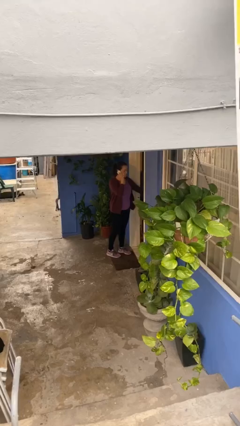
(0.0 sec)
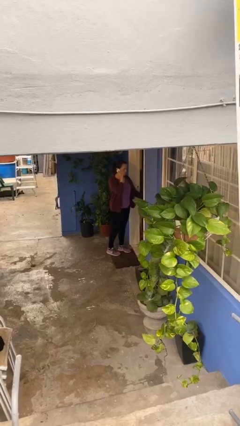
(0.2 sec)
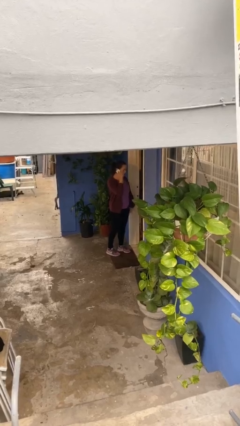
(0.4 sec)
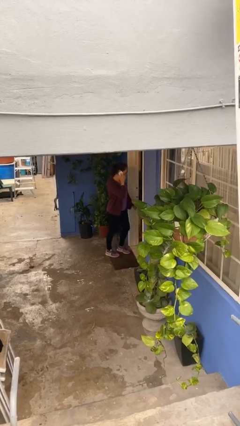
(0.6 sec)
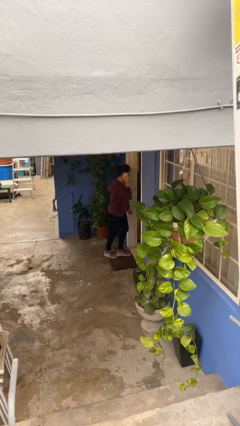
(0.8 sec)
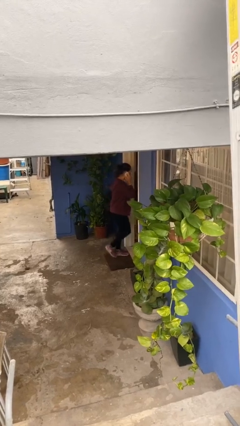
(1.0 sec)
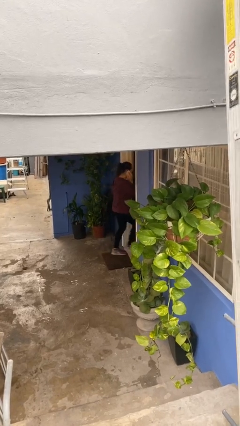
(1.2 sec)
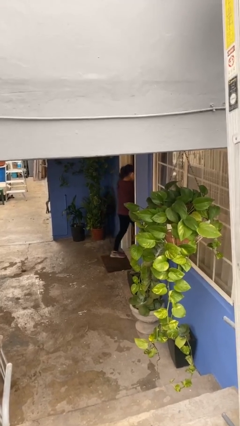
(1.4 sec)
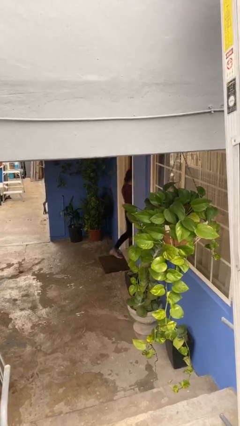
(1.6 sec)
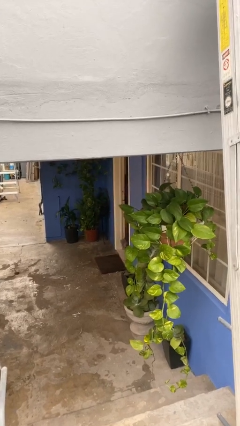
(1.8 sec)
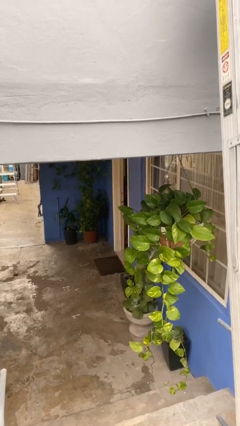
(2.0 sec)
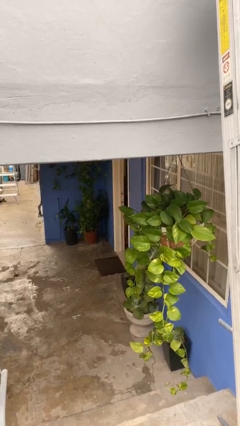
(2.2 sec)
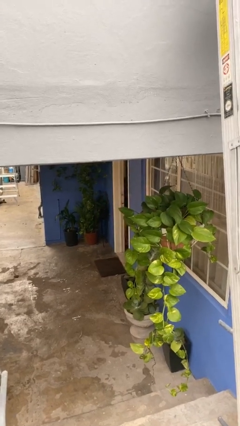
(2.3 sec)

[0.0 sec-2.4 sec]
person exits scene through structure

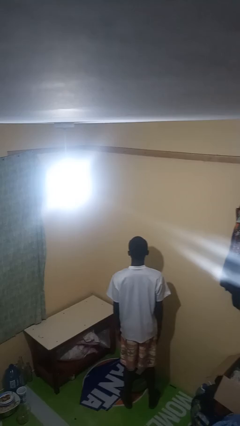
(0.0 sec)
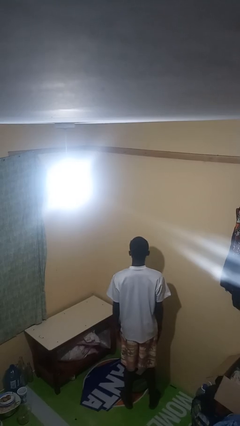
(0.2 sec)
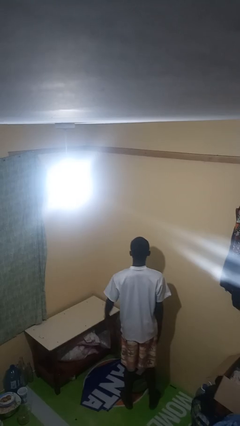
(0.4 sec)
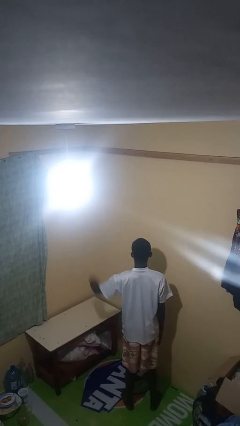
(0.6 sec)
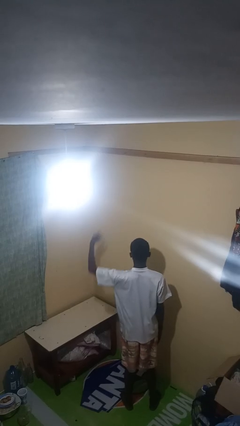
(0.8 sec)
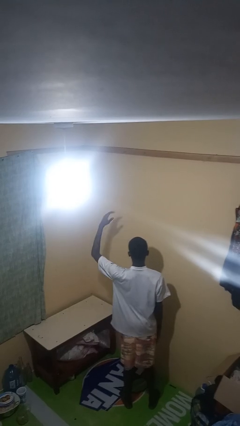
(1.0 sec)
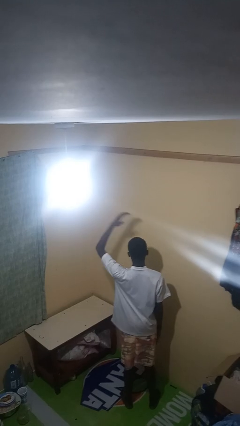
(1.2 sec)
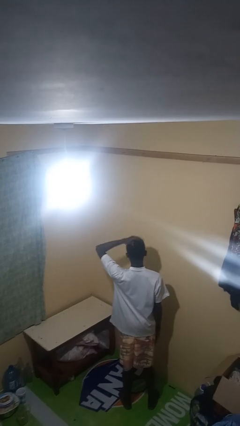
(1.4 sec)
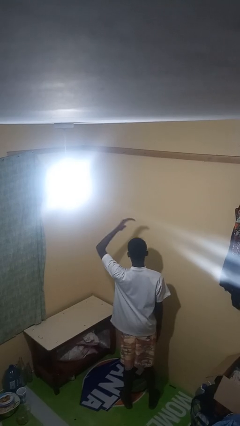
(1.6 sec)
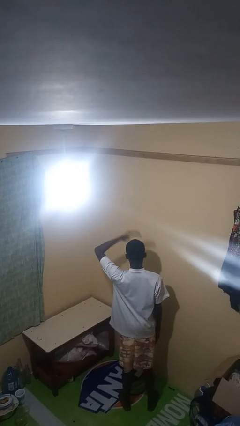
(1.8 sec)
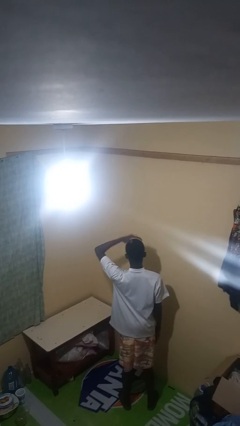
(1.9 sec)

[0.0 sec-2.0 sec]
person pats head

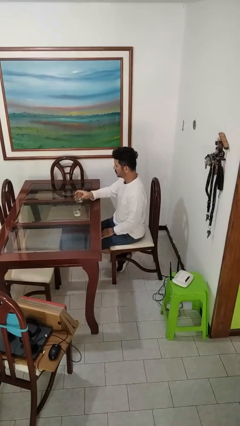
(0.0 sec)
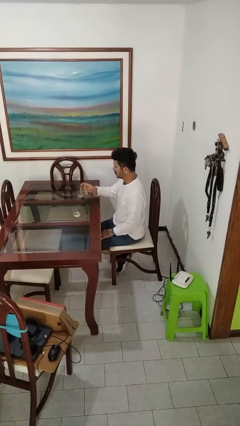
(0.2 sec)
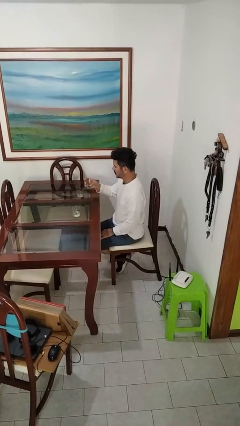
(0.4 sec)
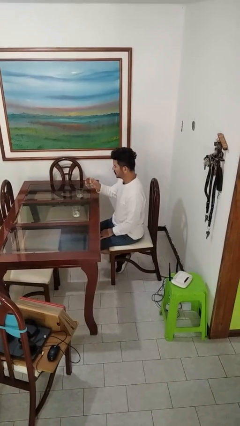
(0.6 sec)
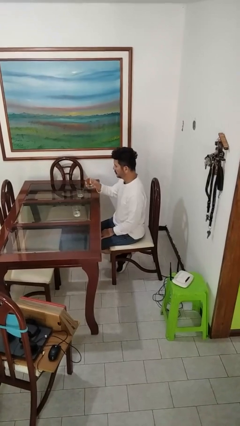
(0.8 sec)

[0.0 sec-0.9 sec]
person picks up object from table

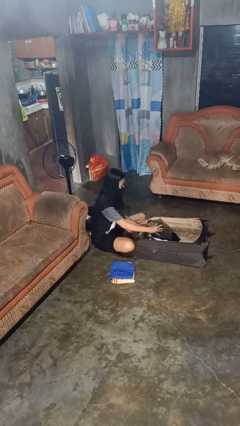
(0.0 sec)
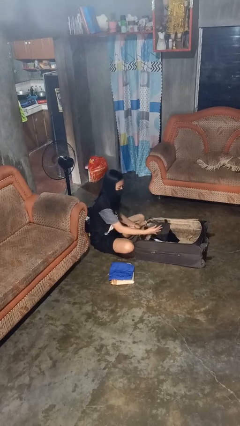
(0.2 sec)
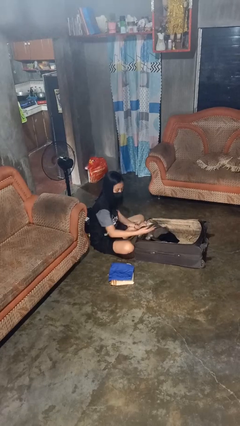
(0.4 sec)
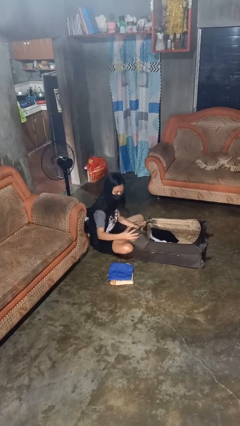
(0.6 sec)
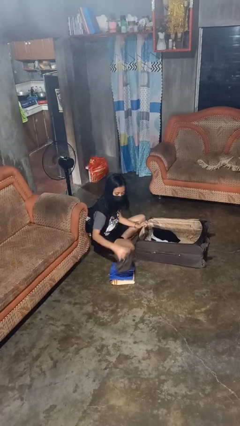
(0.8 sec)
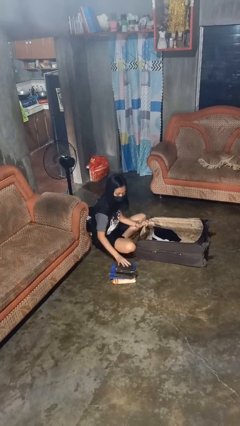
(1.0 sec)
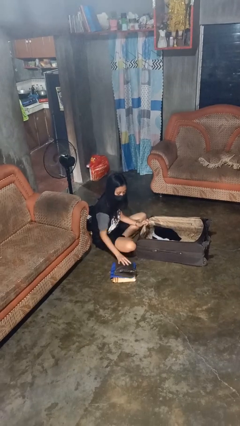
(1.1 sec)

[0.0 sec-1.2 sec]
person unloads clothes from suitcase

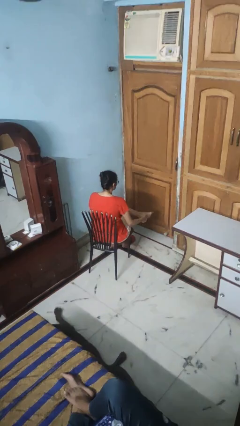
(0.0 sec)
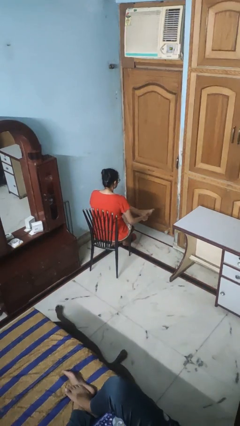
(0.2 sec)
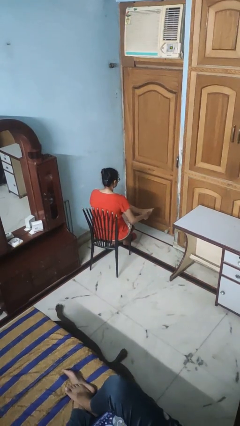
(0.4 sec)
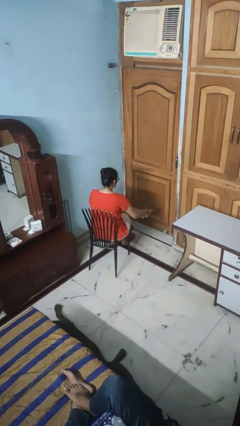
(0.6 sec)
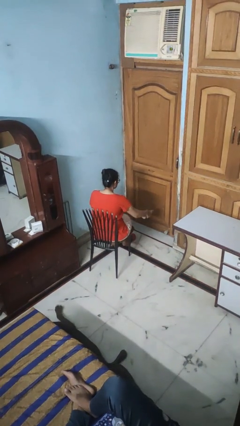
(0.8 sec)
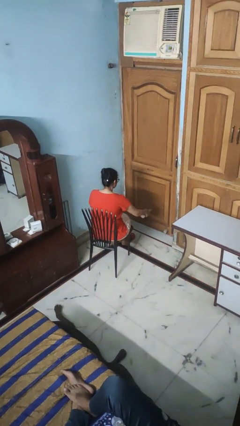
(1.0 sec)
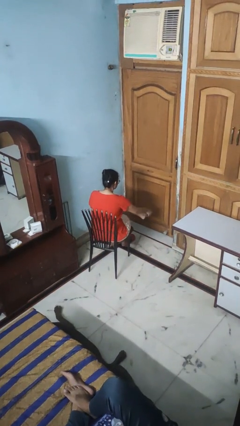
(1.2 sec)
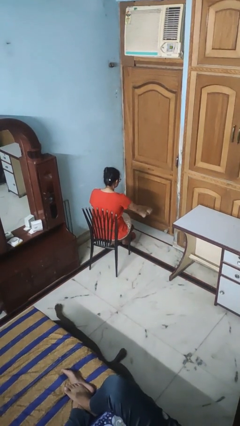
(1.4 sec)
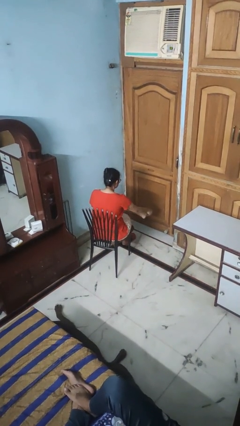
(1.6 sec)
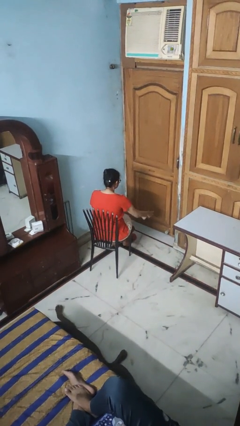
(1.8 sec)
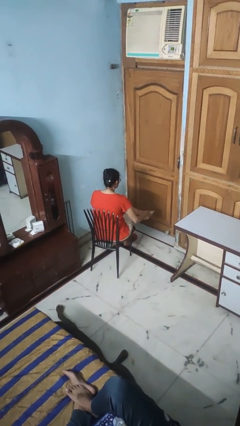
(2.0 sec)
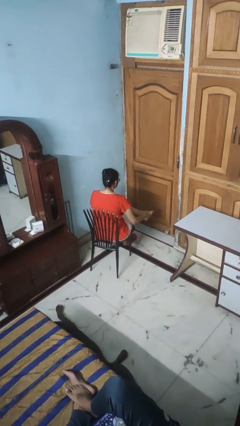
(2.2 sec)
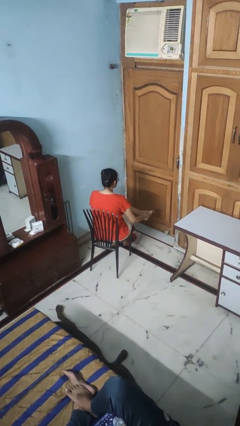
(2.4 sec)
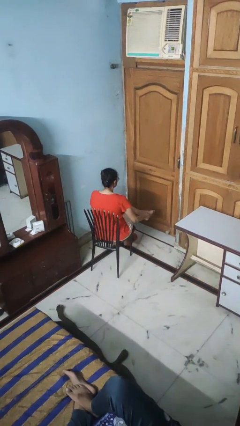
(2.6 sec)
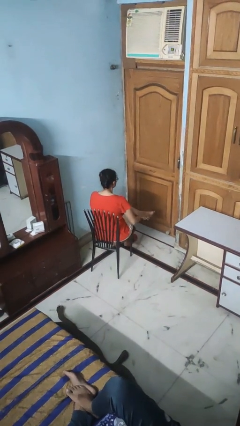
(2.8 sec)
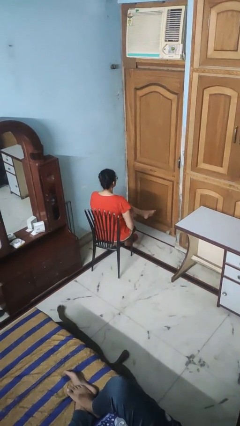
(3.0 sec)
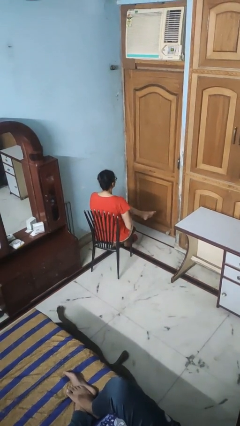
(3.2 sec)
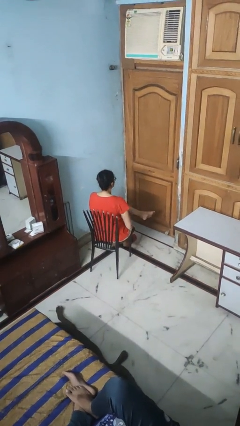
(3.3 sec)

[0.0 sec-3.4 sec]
person rubs foot

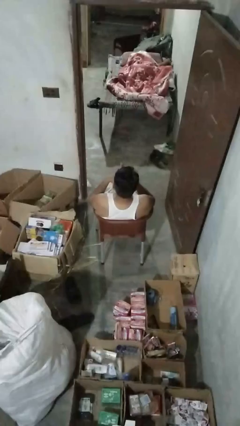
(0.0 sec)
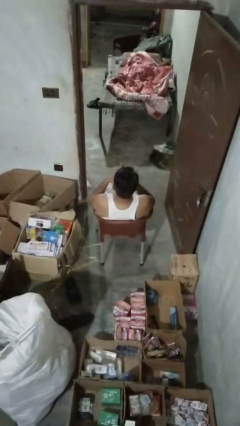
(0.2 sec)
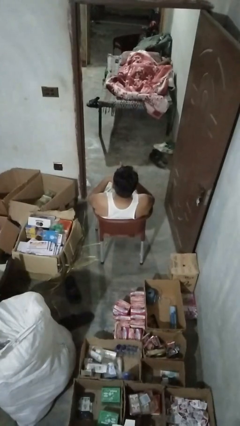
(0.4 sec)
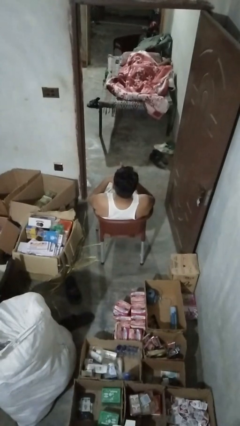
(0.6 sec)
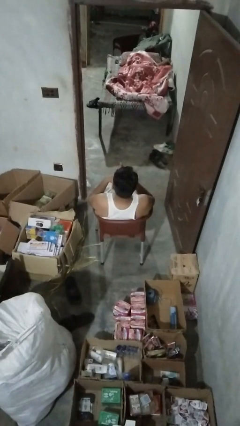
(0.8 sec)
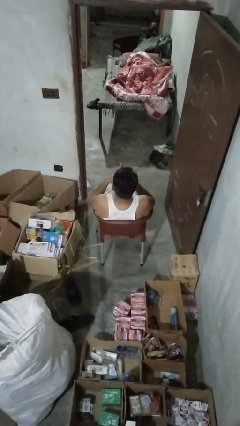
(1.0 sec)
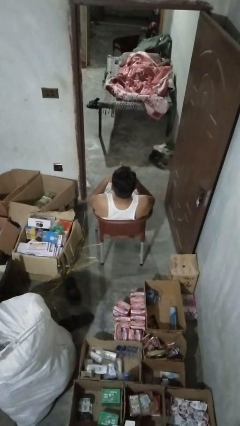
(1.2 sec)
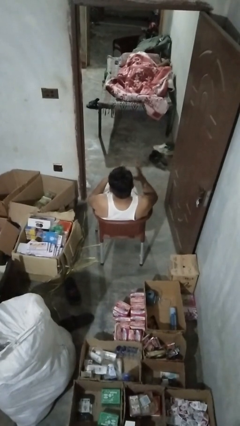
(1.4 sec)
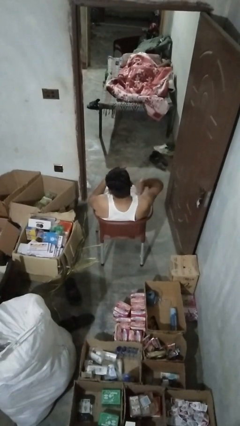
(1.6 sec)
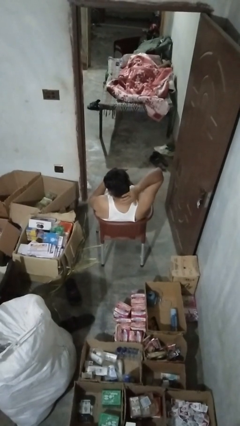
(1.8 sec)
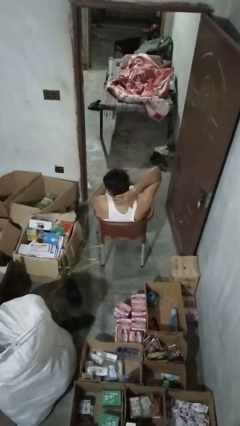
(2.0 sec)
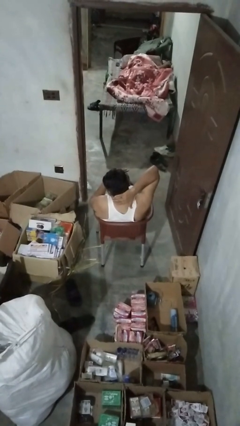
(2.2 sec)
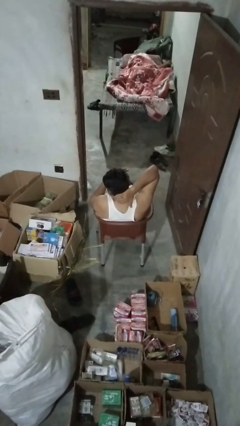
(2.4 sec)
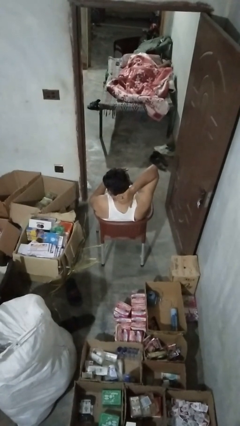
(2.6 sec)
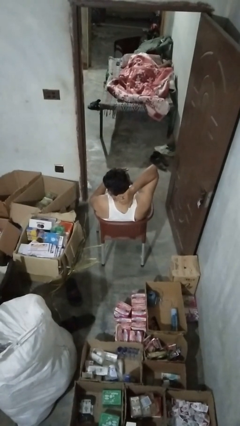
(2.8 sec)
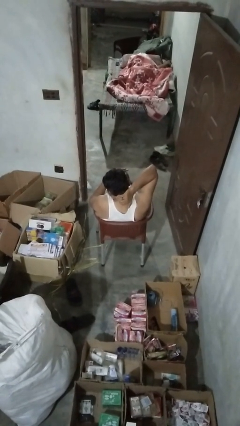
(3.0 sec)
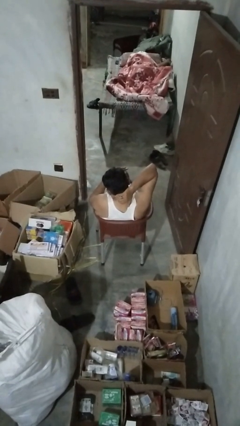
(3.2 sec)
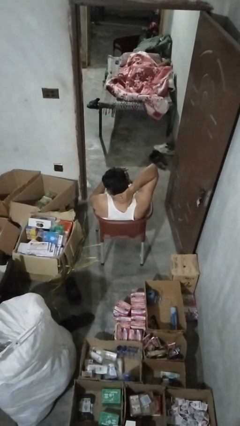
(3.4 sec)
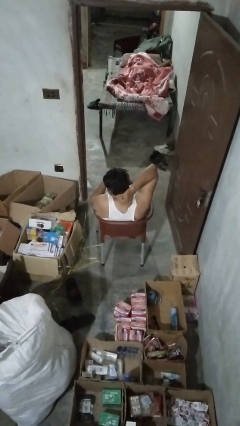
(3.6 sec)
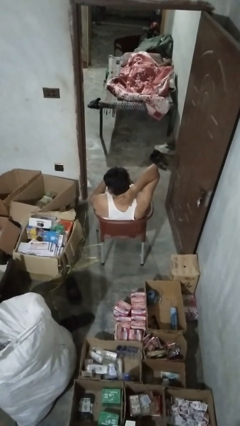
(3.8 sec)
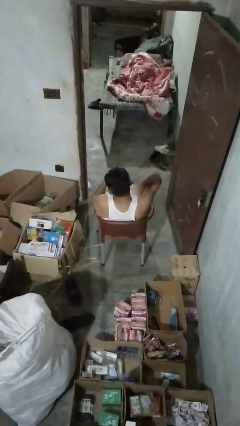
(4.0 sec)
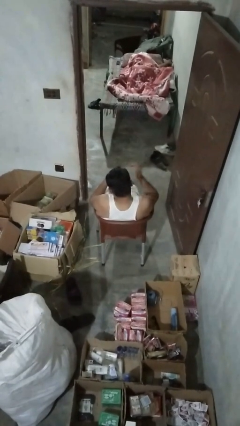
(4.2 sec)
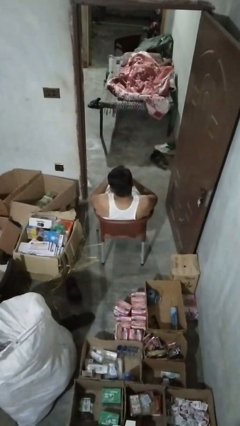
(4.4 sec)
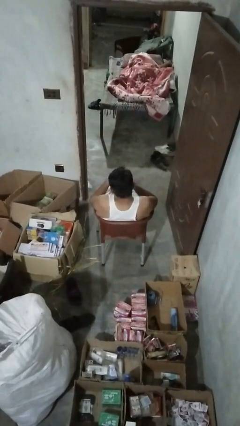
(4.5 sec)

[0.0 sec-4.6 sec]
person rubs neck

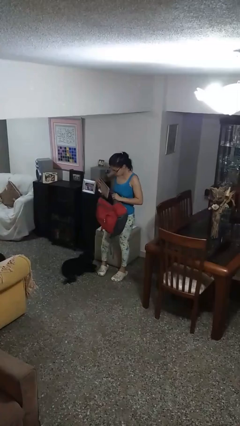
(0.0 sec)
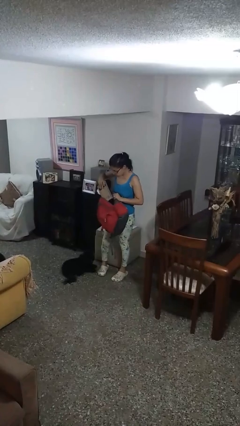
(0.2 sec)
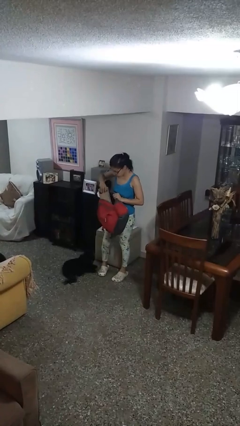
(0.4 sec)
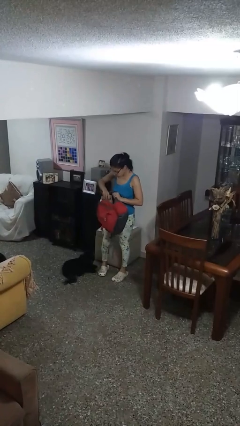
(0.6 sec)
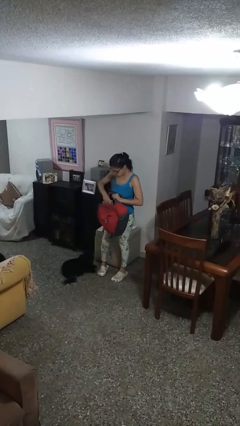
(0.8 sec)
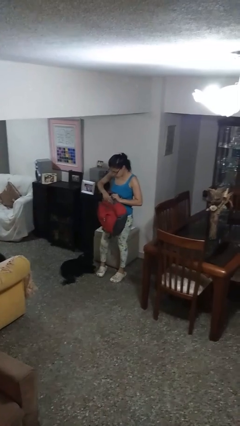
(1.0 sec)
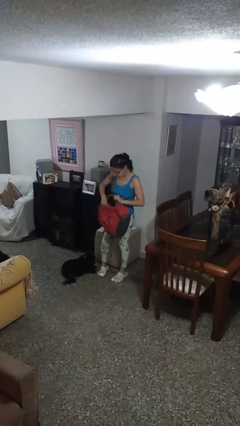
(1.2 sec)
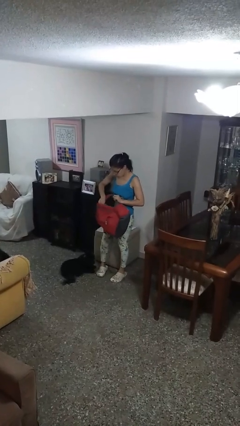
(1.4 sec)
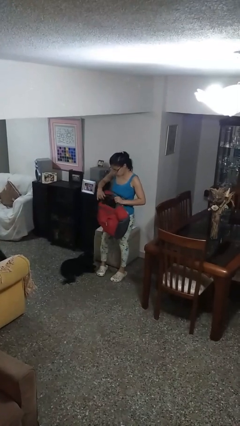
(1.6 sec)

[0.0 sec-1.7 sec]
person puts object into backpack

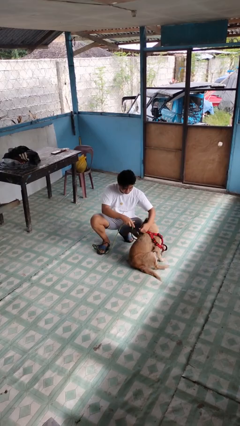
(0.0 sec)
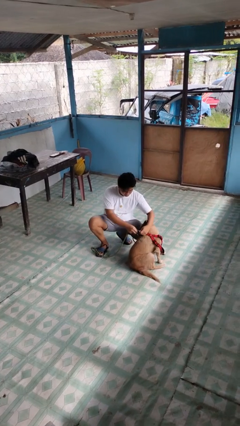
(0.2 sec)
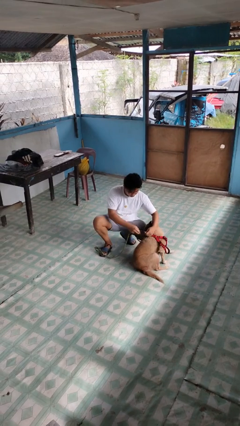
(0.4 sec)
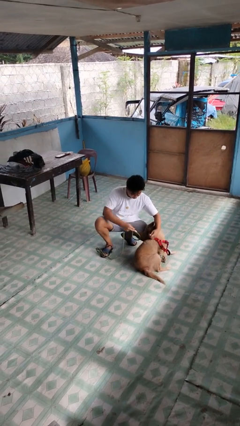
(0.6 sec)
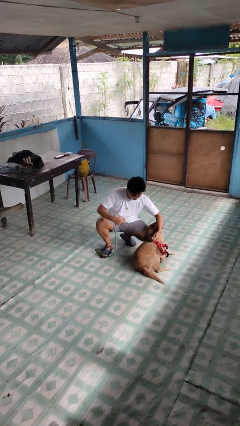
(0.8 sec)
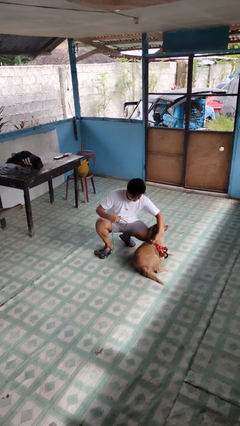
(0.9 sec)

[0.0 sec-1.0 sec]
person unattaches leash from dog

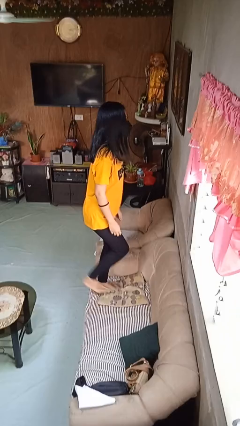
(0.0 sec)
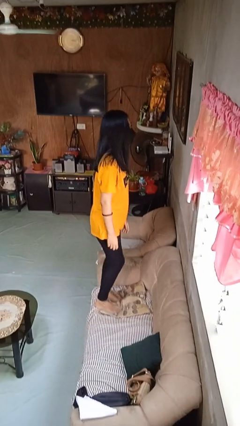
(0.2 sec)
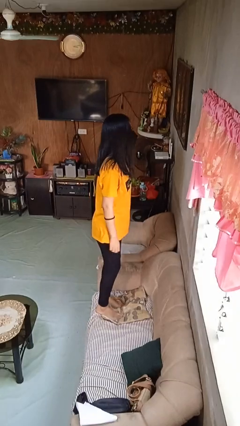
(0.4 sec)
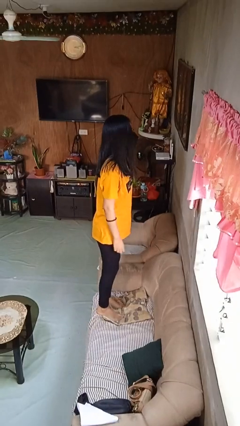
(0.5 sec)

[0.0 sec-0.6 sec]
person climbs on couch
